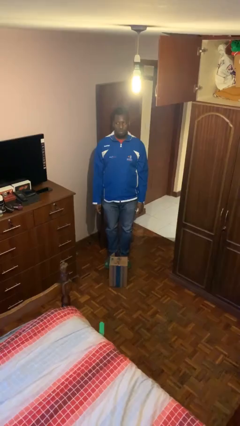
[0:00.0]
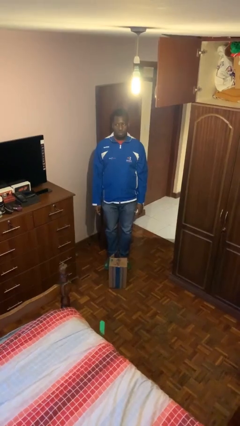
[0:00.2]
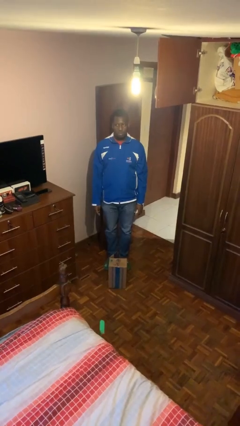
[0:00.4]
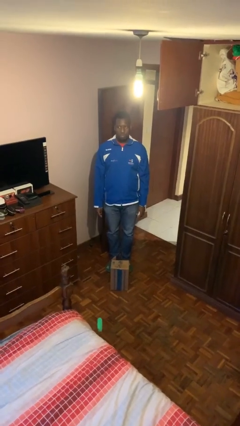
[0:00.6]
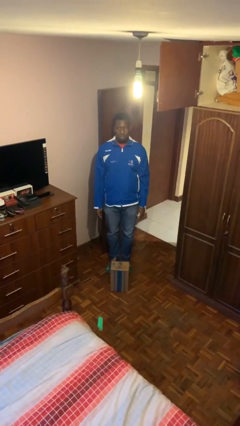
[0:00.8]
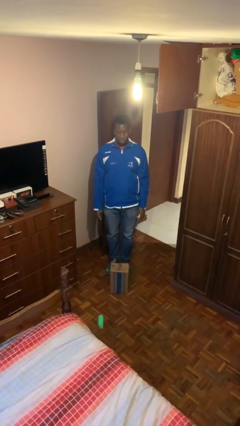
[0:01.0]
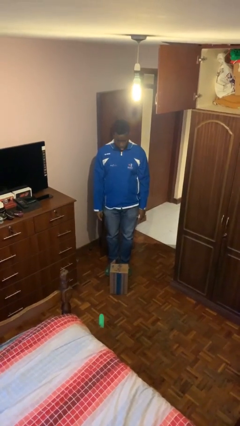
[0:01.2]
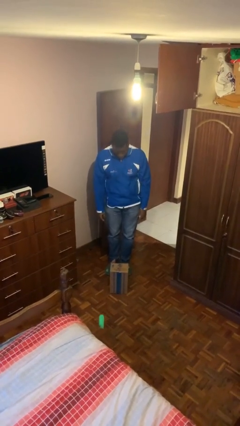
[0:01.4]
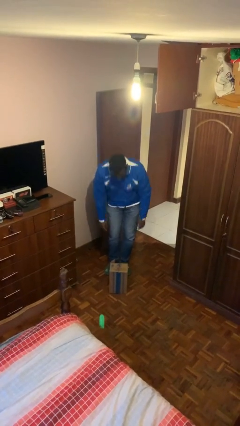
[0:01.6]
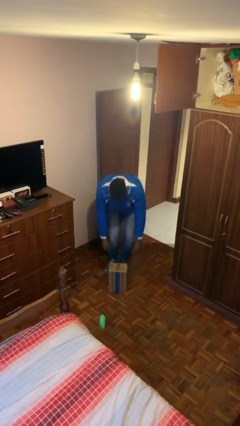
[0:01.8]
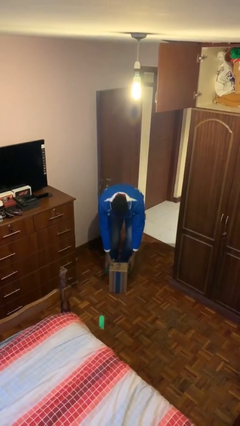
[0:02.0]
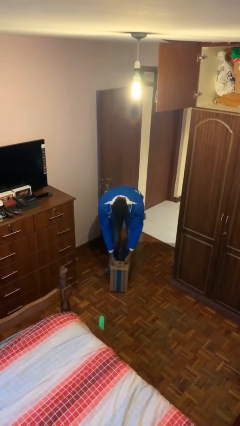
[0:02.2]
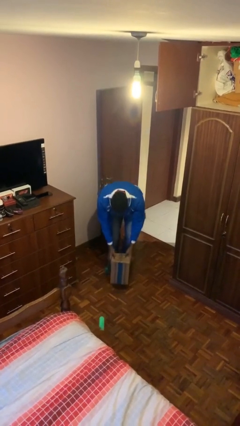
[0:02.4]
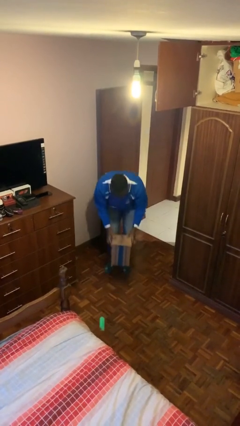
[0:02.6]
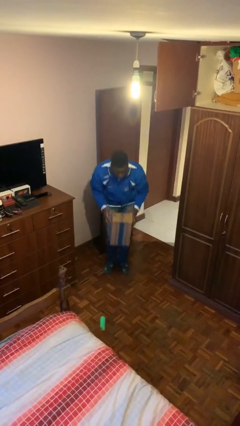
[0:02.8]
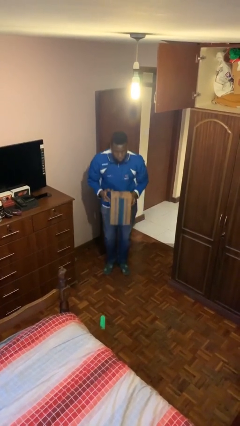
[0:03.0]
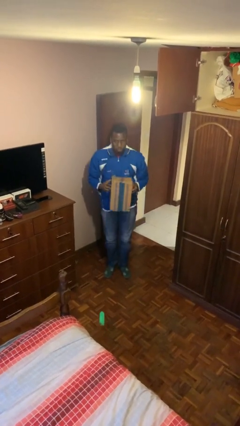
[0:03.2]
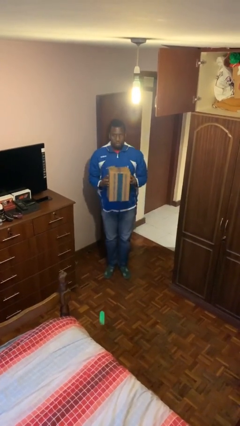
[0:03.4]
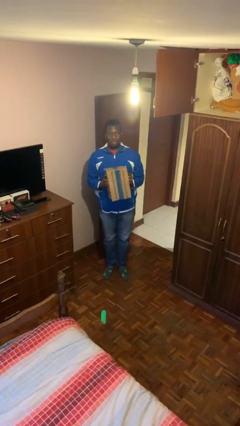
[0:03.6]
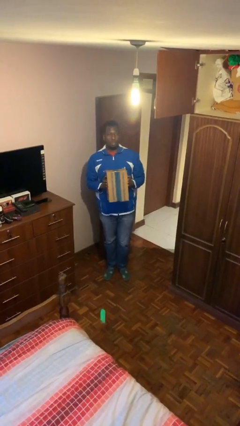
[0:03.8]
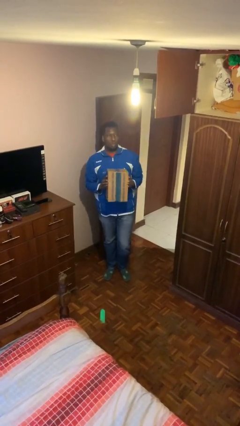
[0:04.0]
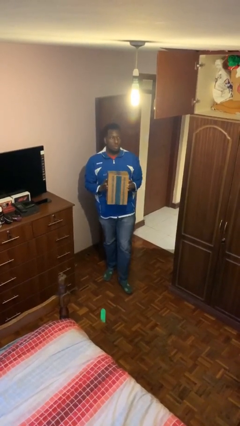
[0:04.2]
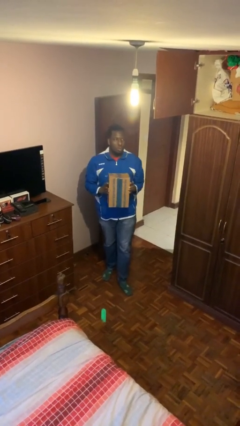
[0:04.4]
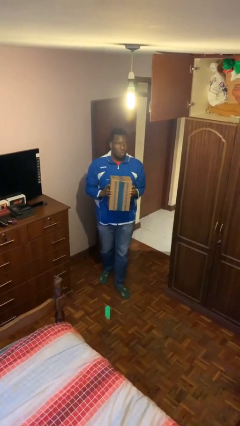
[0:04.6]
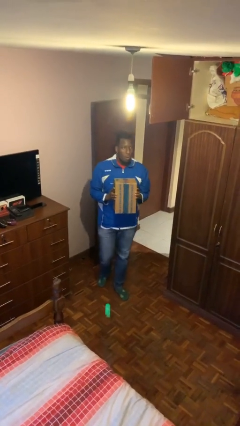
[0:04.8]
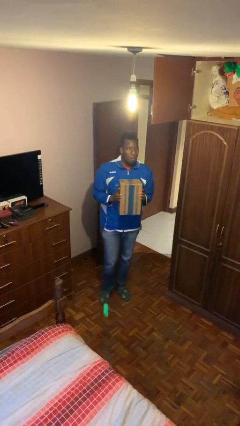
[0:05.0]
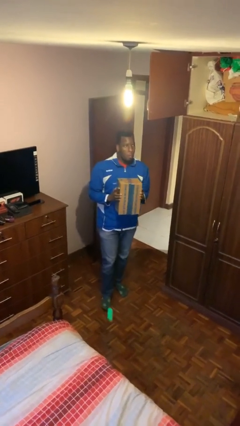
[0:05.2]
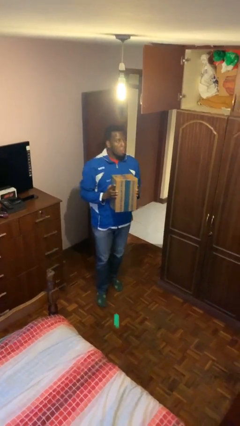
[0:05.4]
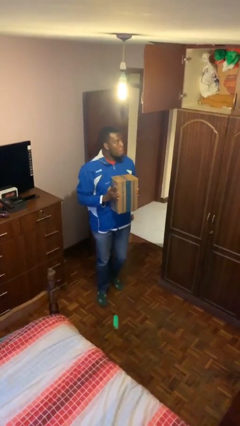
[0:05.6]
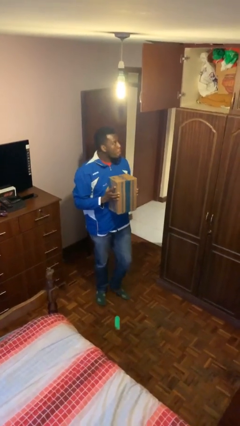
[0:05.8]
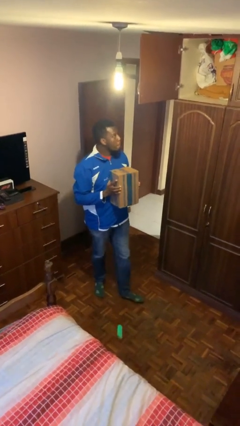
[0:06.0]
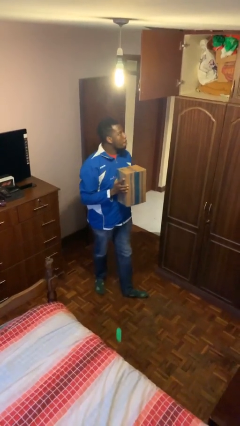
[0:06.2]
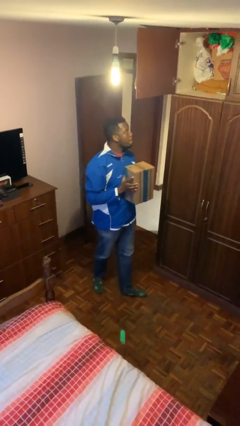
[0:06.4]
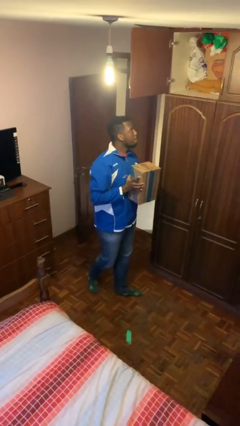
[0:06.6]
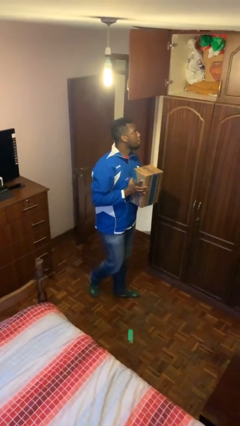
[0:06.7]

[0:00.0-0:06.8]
person picks up object from floor

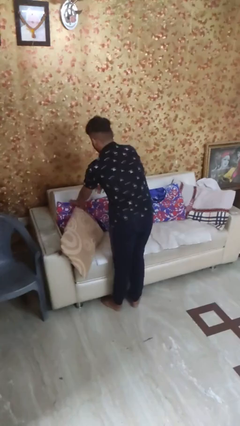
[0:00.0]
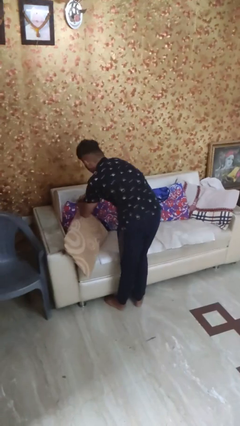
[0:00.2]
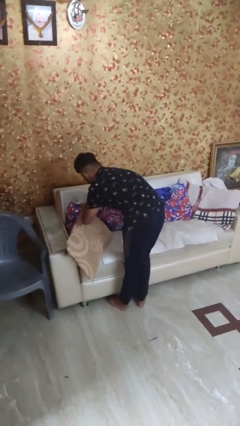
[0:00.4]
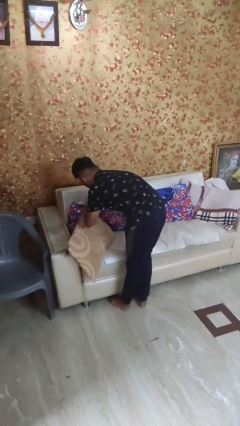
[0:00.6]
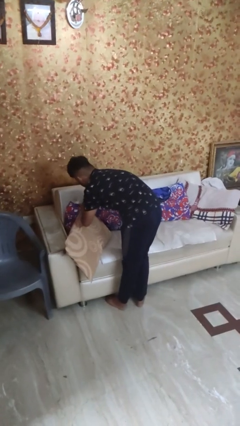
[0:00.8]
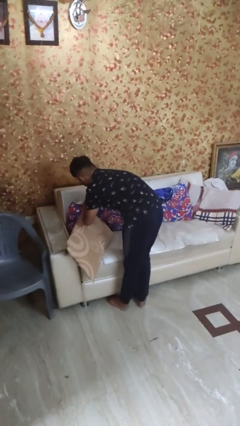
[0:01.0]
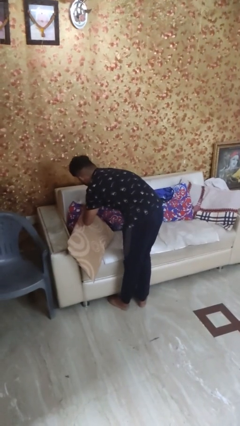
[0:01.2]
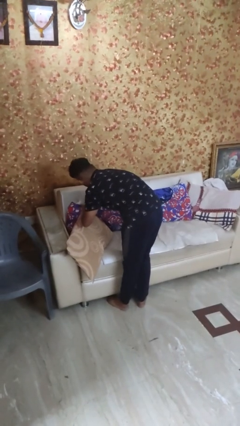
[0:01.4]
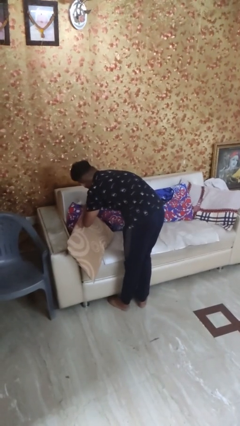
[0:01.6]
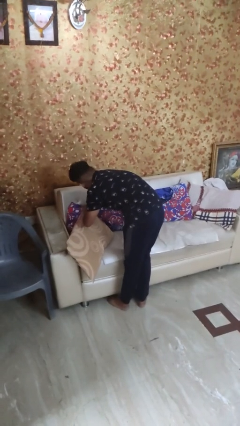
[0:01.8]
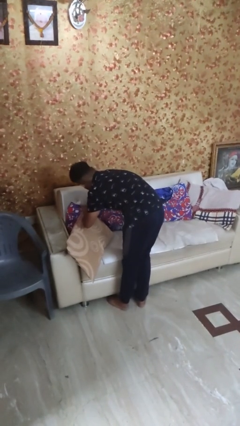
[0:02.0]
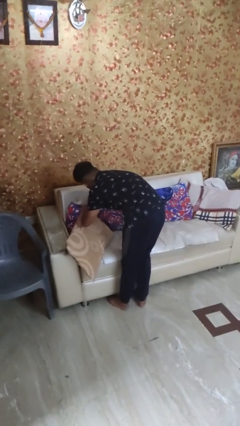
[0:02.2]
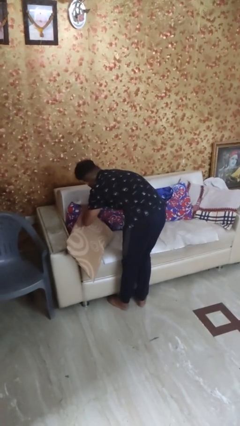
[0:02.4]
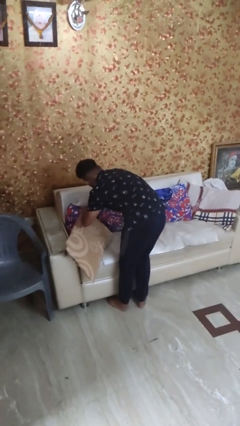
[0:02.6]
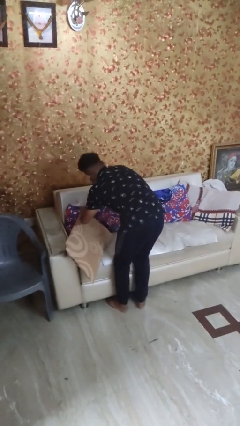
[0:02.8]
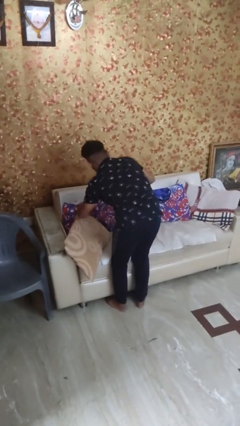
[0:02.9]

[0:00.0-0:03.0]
person searches in couch

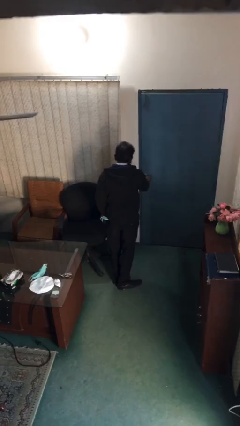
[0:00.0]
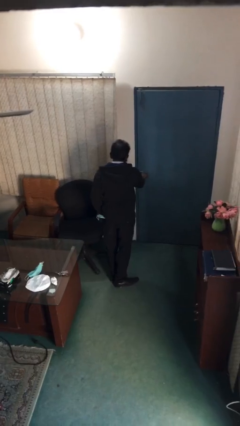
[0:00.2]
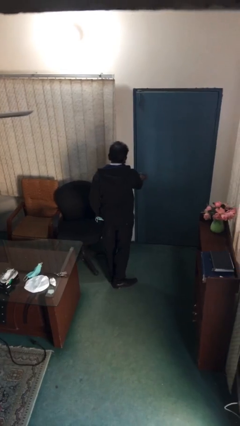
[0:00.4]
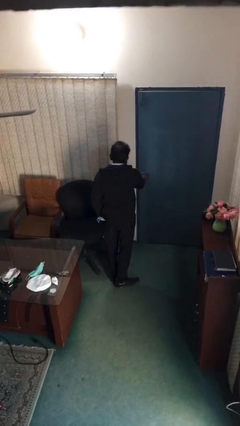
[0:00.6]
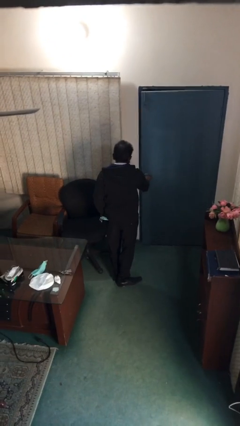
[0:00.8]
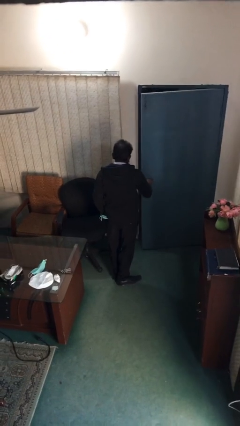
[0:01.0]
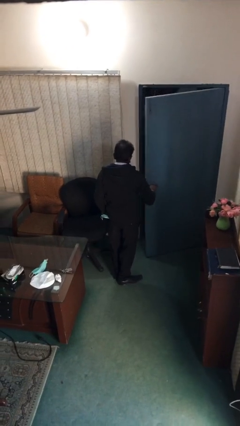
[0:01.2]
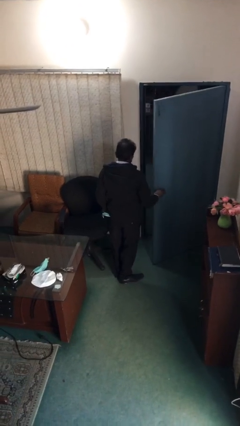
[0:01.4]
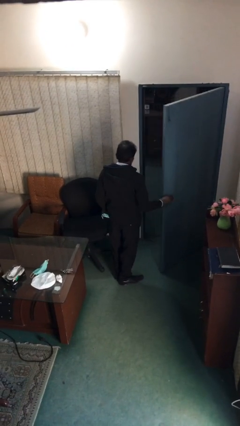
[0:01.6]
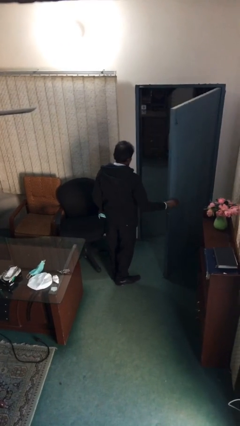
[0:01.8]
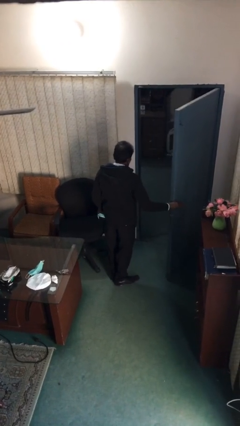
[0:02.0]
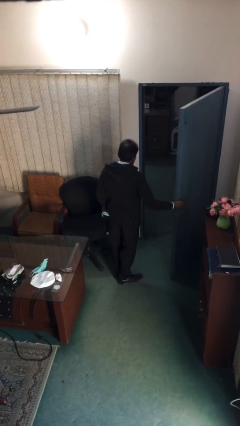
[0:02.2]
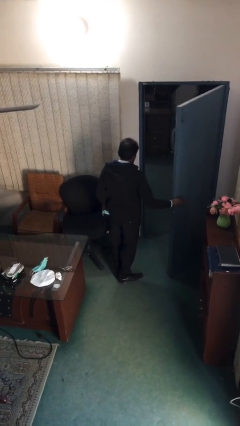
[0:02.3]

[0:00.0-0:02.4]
person opens facility door

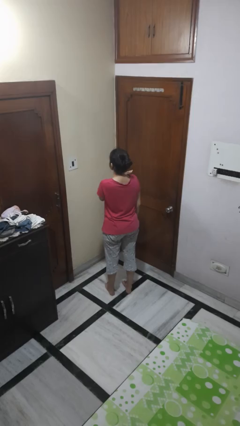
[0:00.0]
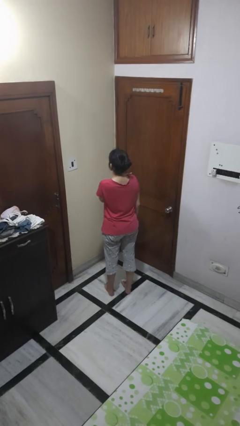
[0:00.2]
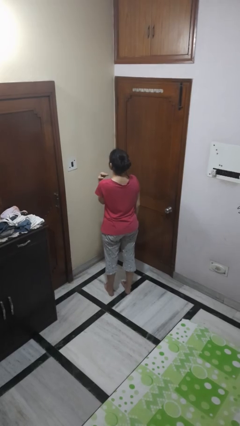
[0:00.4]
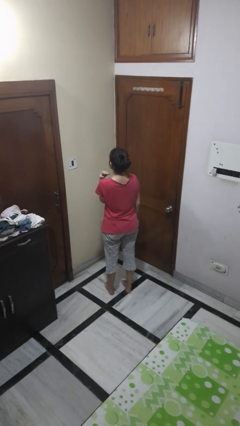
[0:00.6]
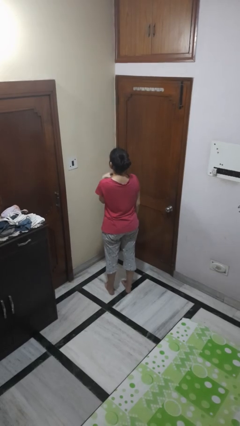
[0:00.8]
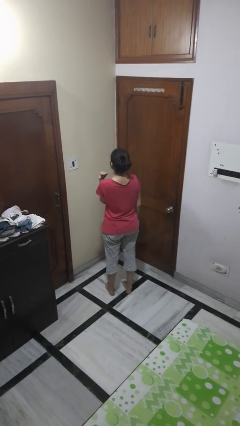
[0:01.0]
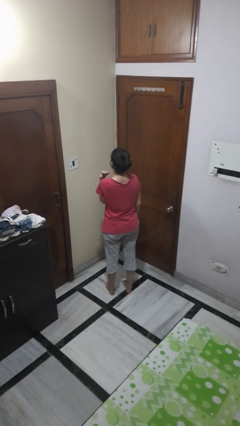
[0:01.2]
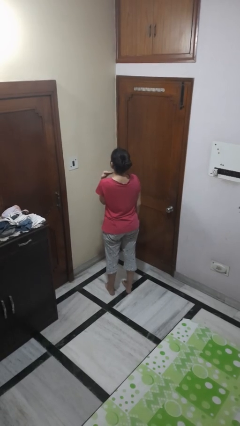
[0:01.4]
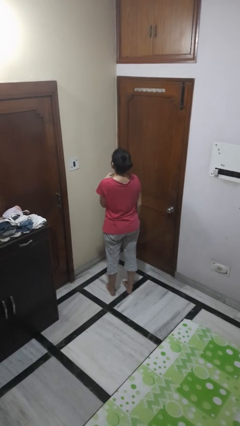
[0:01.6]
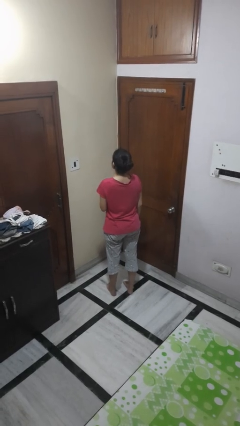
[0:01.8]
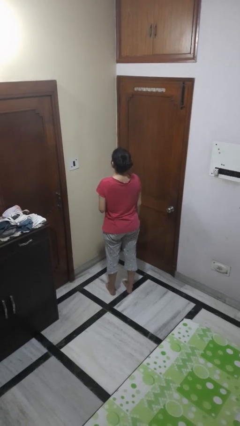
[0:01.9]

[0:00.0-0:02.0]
person gestures cut

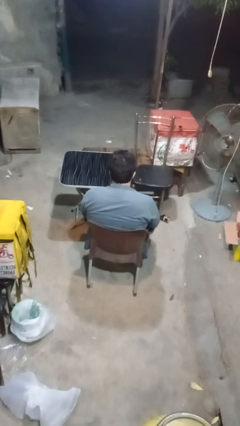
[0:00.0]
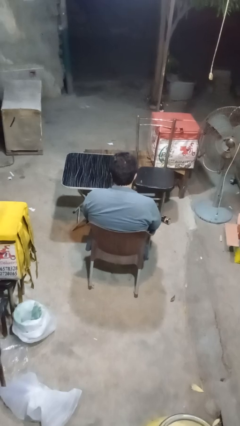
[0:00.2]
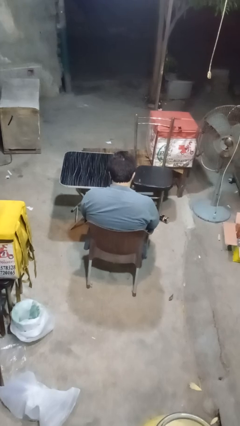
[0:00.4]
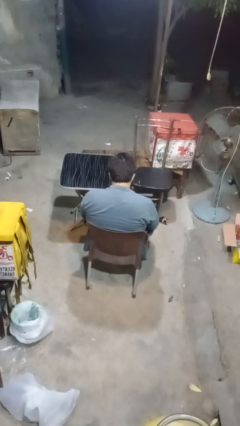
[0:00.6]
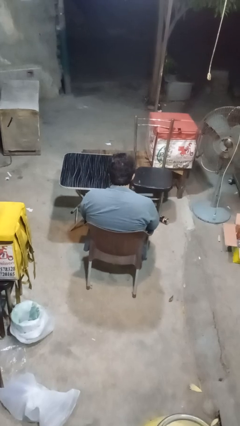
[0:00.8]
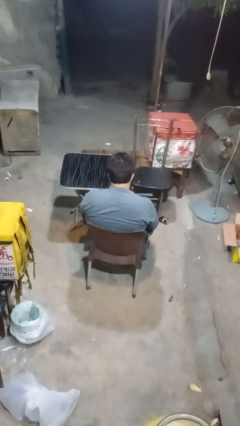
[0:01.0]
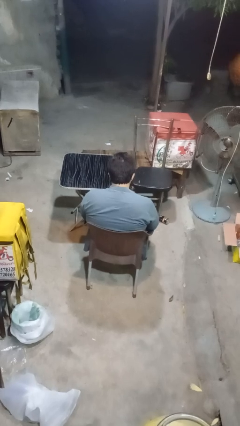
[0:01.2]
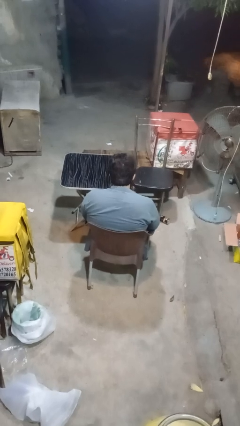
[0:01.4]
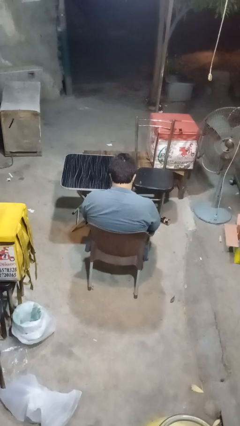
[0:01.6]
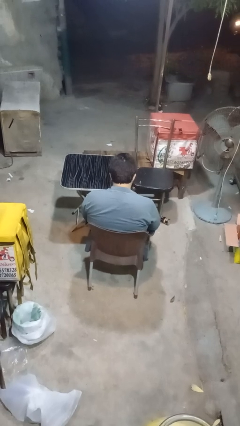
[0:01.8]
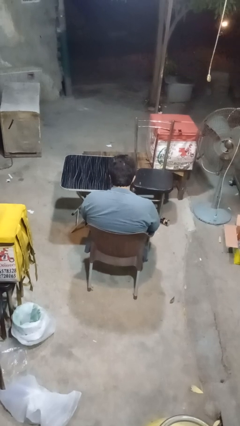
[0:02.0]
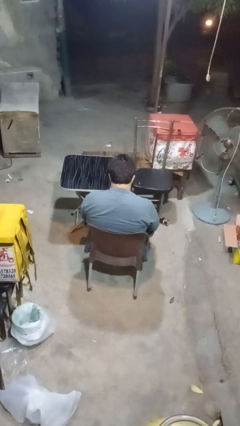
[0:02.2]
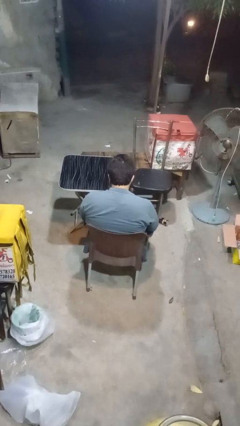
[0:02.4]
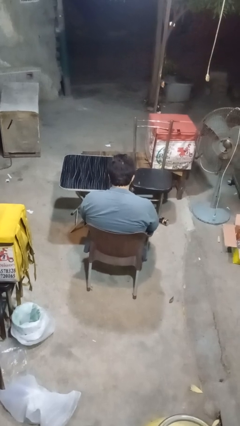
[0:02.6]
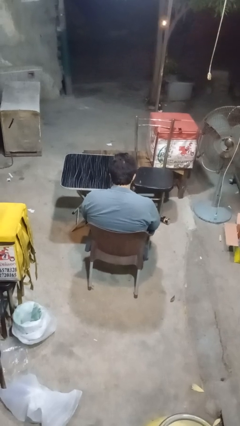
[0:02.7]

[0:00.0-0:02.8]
person nods head

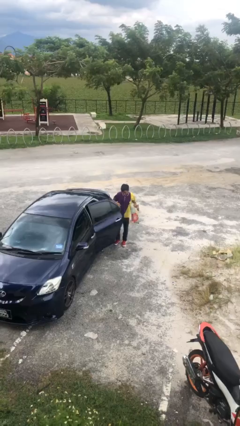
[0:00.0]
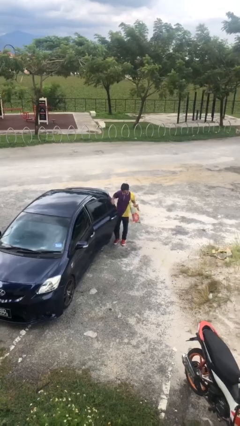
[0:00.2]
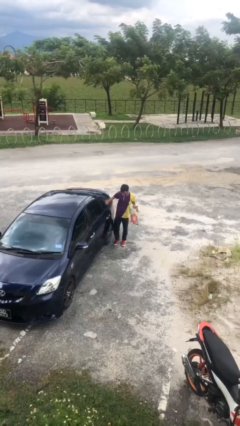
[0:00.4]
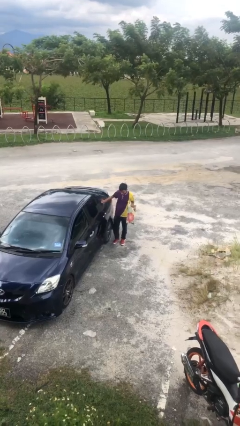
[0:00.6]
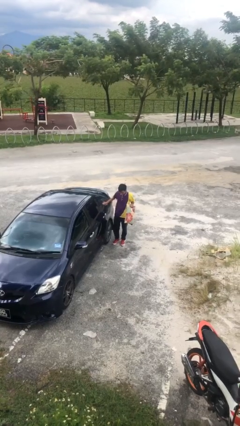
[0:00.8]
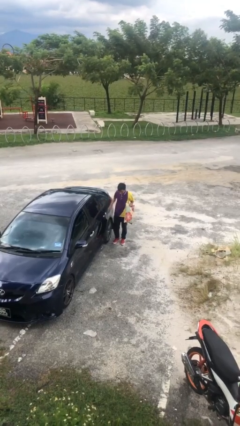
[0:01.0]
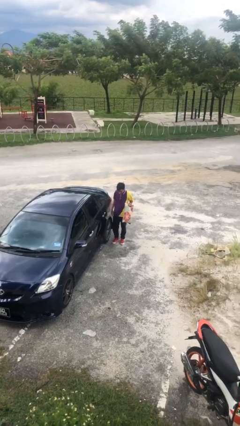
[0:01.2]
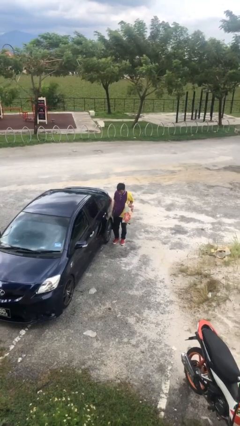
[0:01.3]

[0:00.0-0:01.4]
person closes car door
